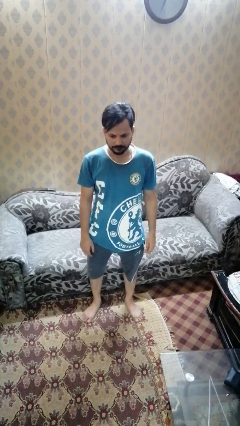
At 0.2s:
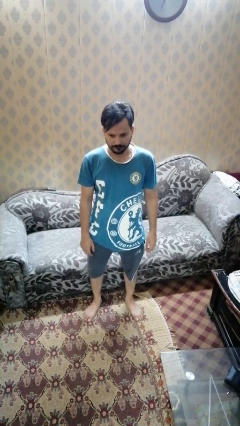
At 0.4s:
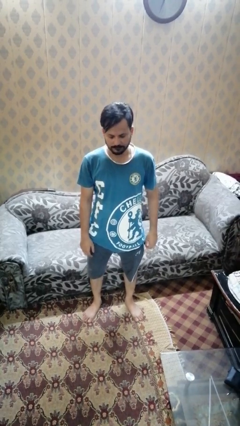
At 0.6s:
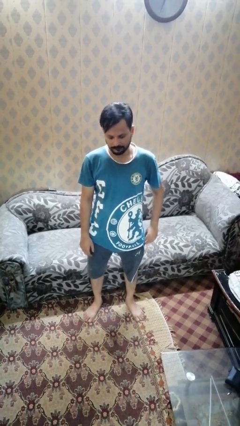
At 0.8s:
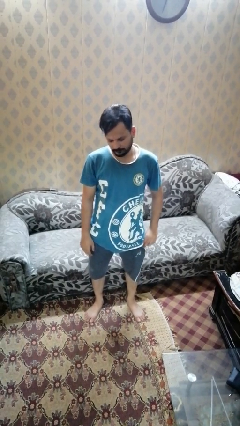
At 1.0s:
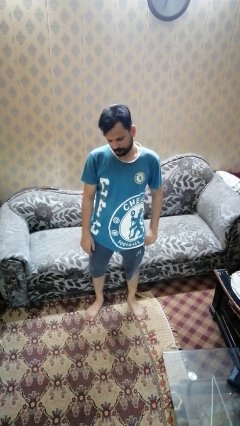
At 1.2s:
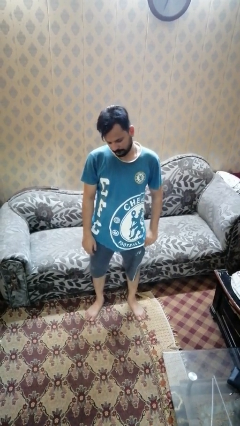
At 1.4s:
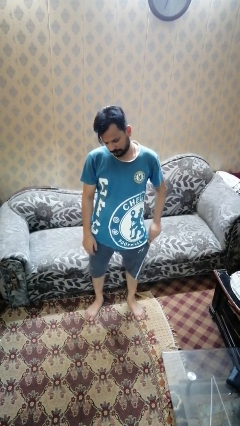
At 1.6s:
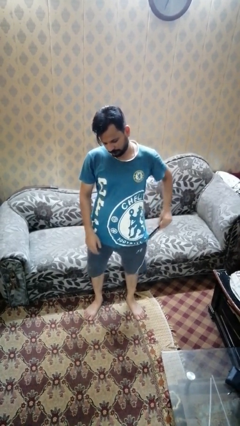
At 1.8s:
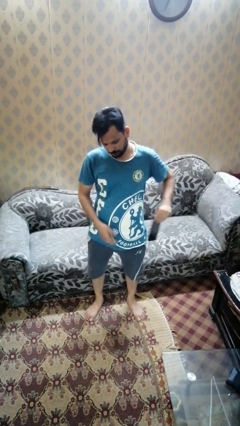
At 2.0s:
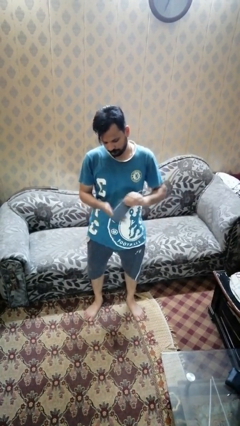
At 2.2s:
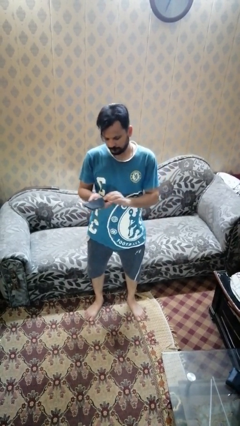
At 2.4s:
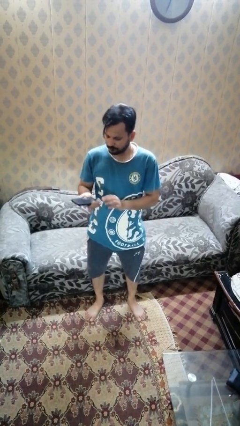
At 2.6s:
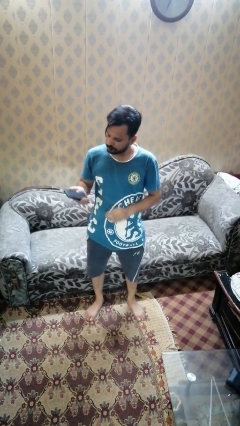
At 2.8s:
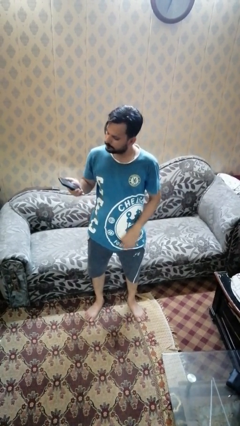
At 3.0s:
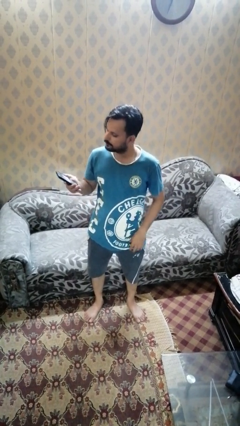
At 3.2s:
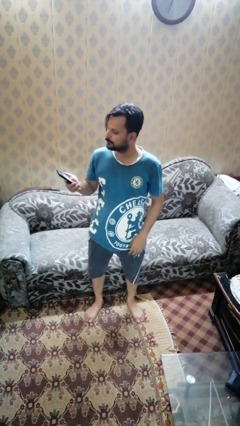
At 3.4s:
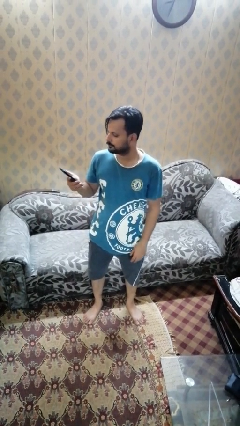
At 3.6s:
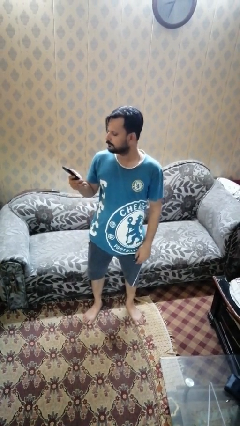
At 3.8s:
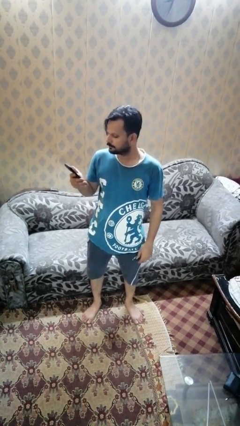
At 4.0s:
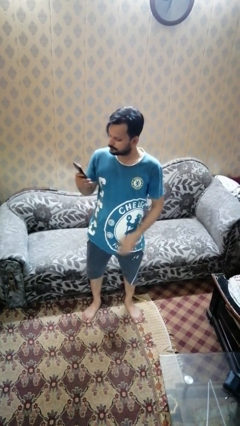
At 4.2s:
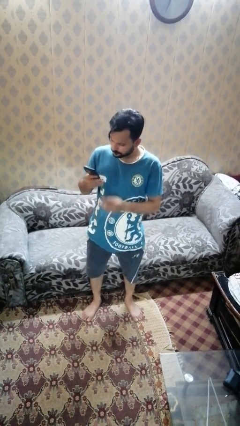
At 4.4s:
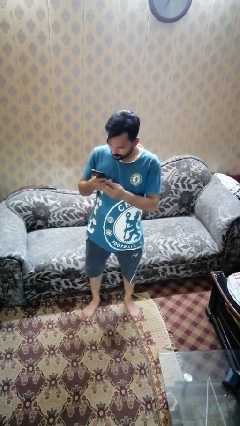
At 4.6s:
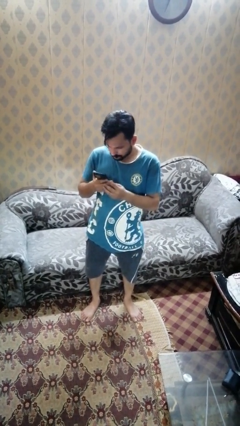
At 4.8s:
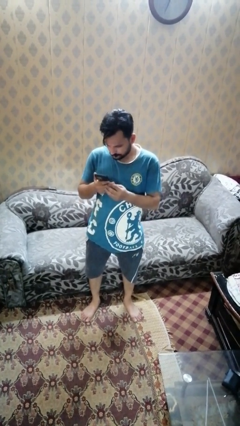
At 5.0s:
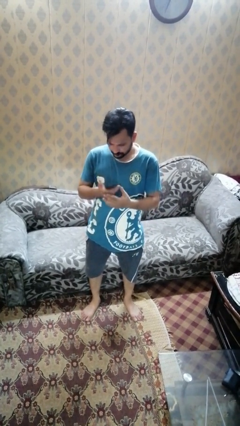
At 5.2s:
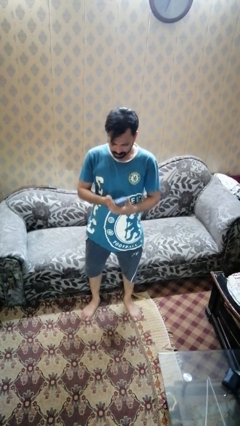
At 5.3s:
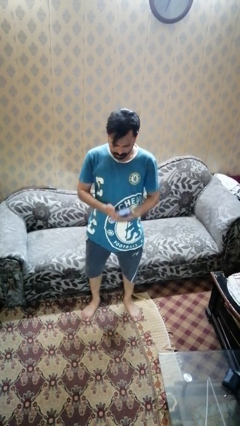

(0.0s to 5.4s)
person takes phone from pocket

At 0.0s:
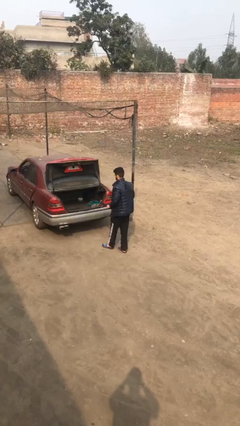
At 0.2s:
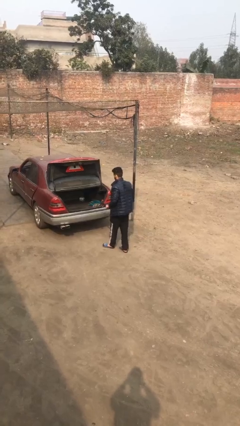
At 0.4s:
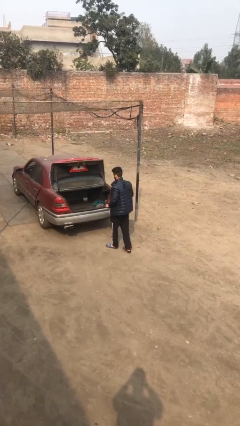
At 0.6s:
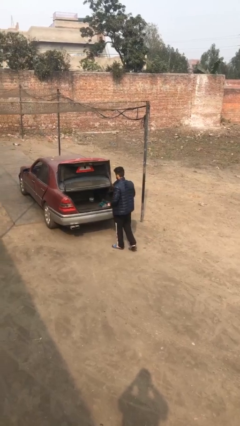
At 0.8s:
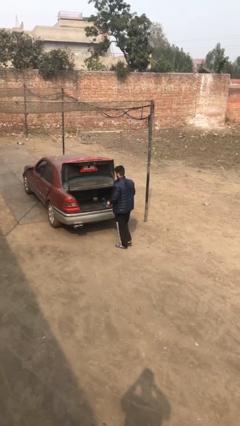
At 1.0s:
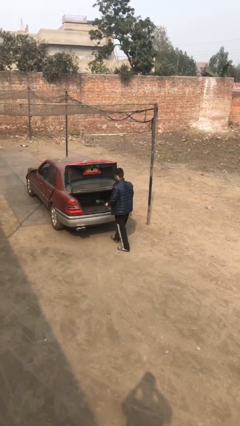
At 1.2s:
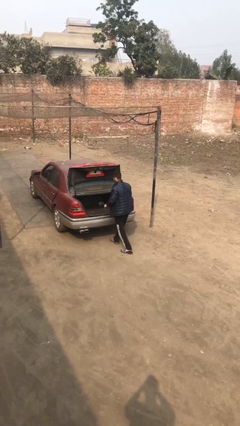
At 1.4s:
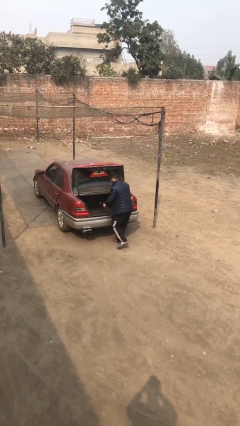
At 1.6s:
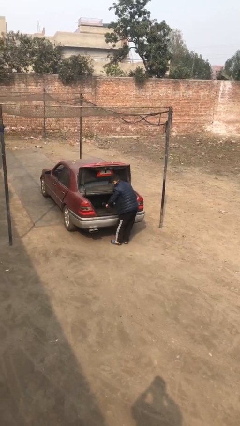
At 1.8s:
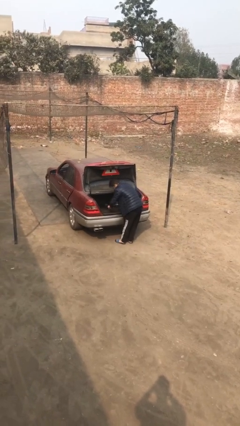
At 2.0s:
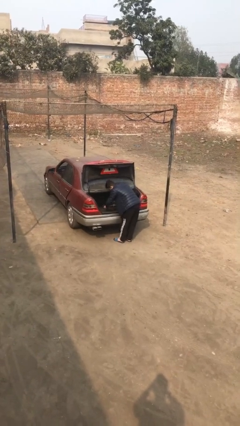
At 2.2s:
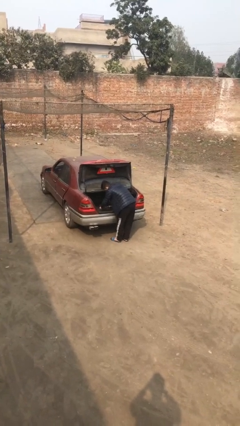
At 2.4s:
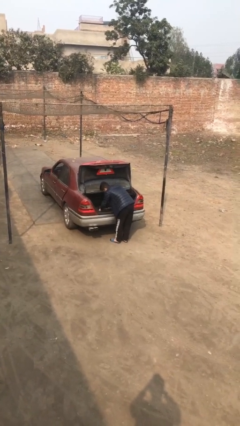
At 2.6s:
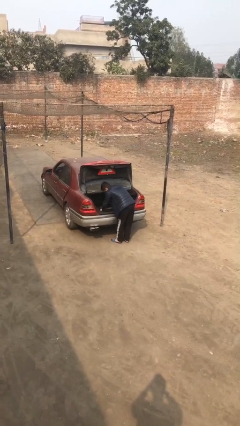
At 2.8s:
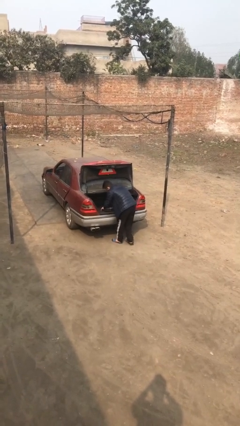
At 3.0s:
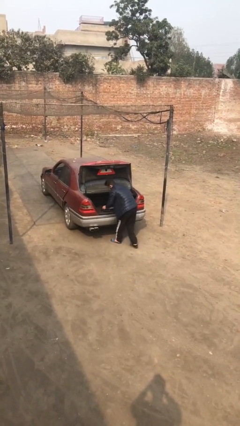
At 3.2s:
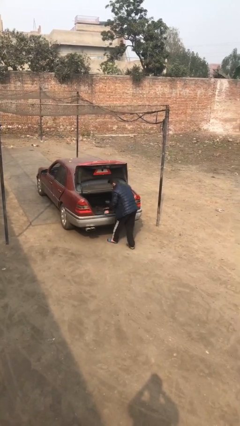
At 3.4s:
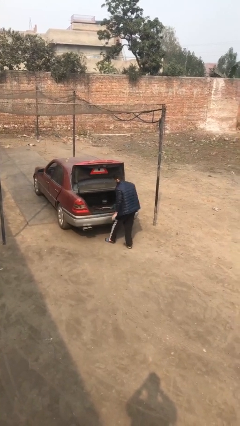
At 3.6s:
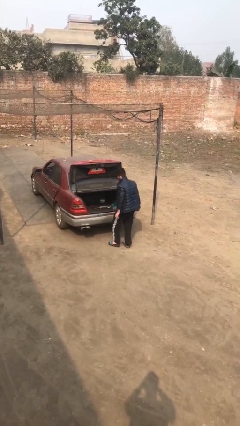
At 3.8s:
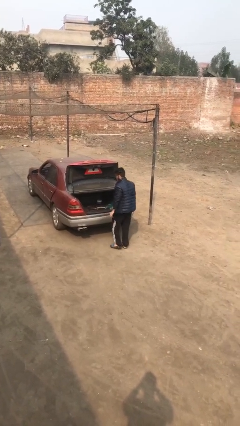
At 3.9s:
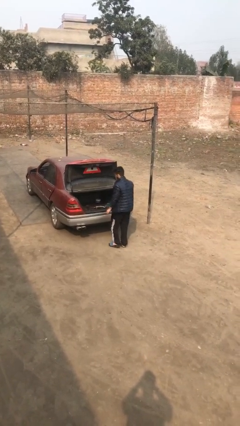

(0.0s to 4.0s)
person loads car

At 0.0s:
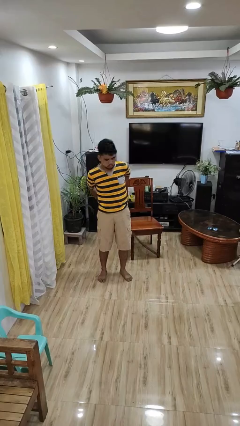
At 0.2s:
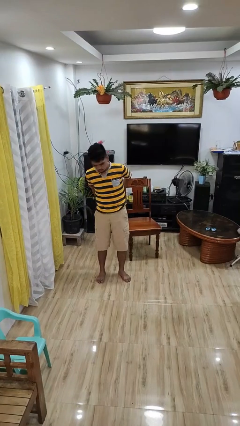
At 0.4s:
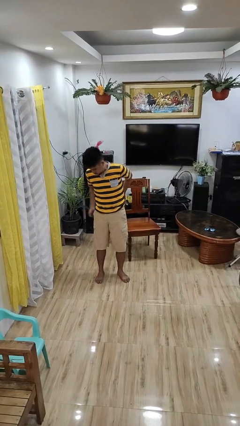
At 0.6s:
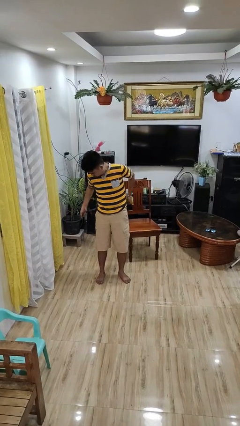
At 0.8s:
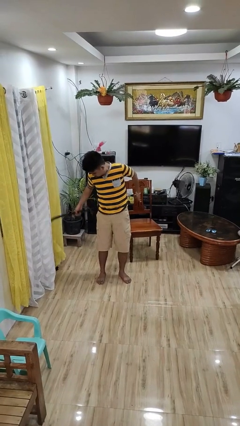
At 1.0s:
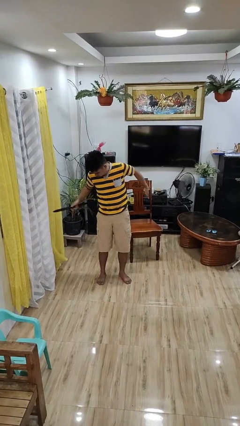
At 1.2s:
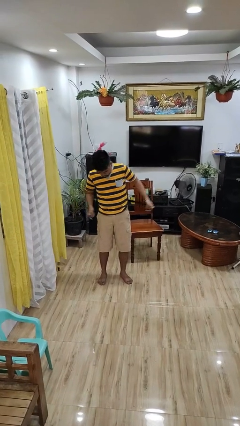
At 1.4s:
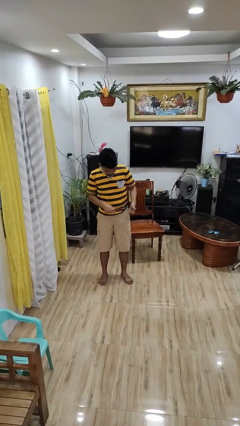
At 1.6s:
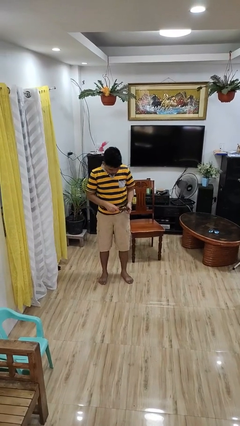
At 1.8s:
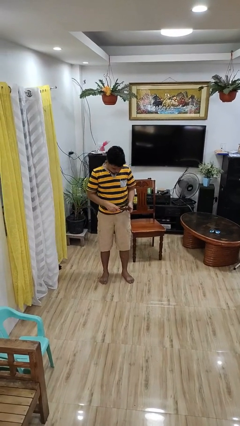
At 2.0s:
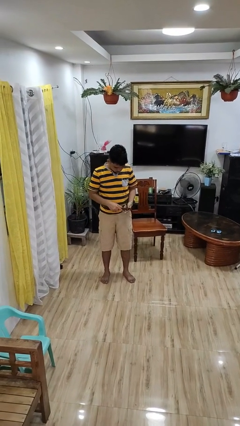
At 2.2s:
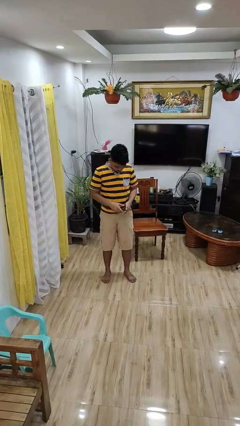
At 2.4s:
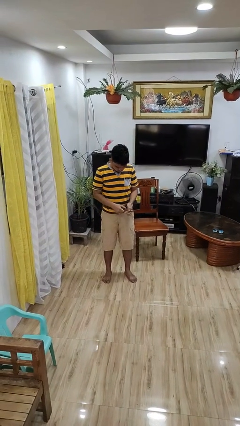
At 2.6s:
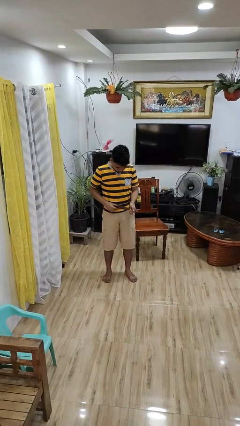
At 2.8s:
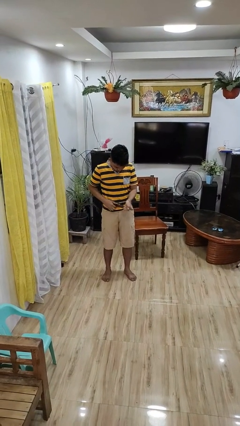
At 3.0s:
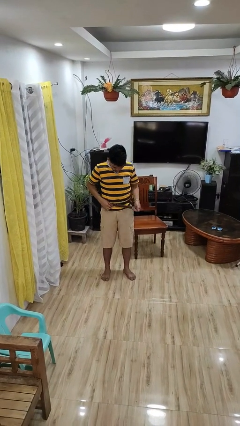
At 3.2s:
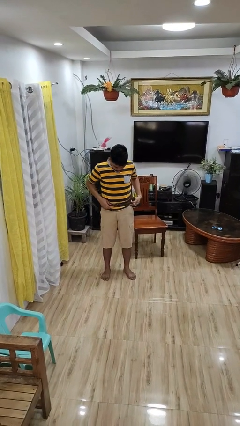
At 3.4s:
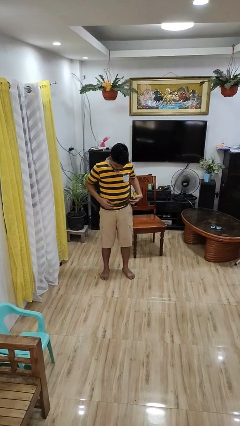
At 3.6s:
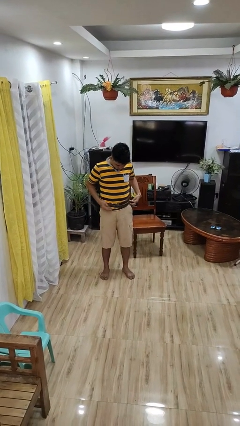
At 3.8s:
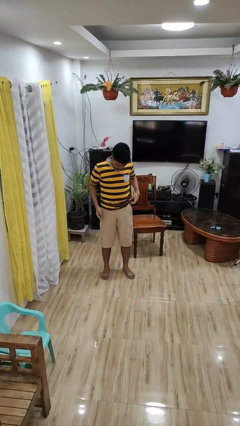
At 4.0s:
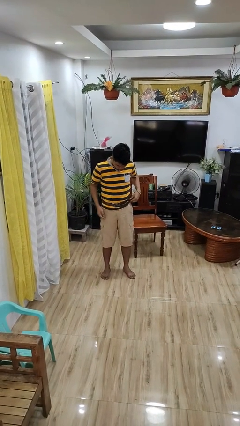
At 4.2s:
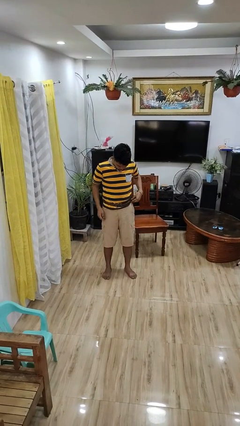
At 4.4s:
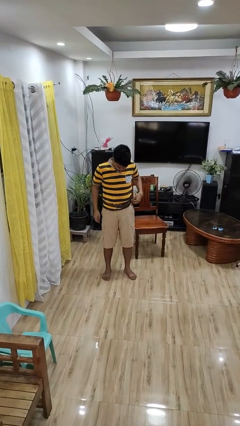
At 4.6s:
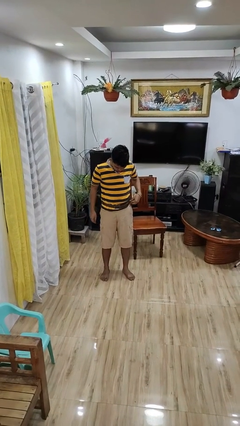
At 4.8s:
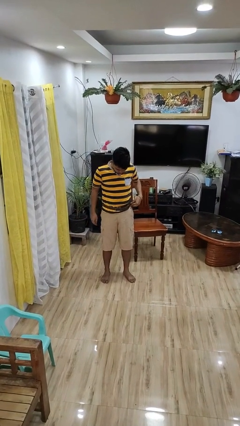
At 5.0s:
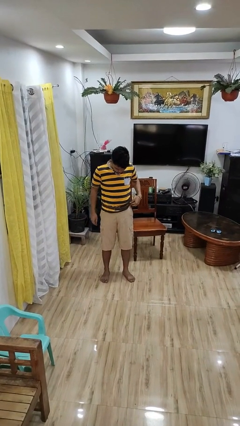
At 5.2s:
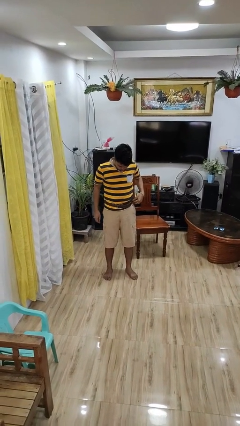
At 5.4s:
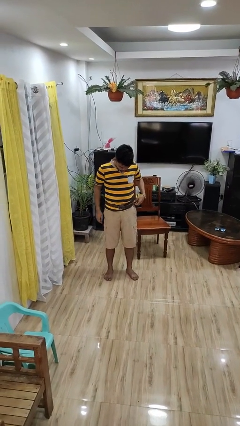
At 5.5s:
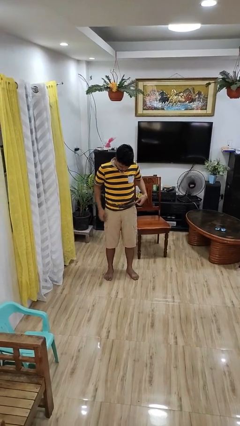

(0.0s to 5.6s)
person puts on belt

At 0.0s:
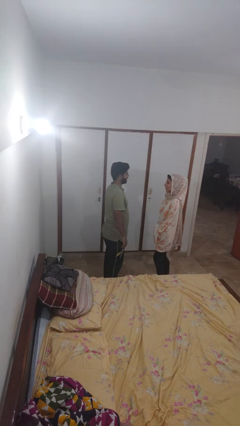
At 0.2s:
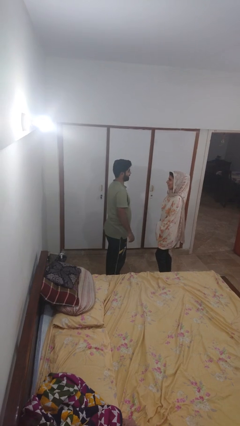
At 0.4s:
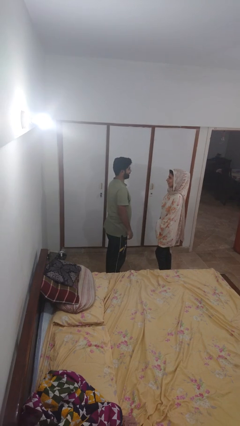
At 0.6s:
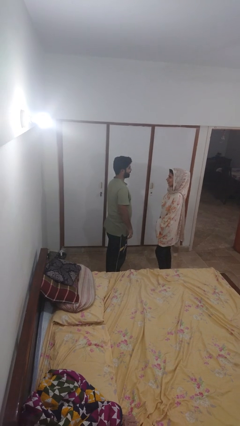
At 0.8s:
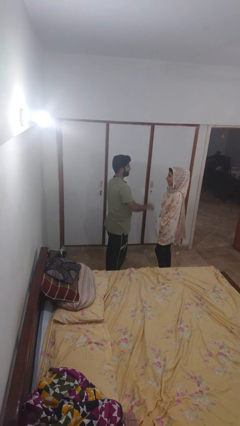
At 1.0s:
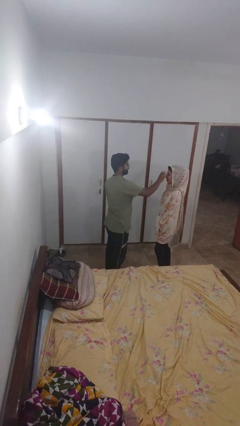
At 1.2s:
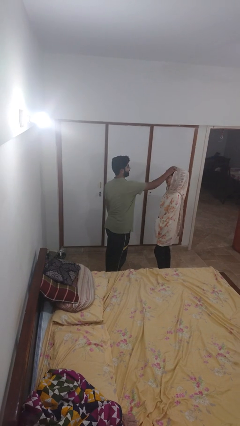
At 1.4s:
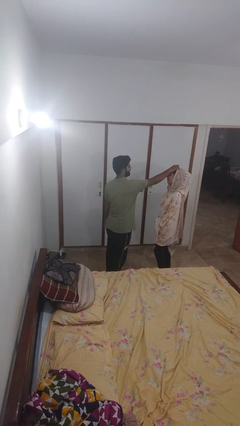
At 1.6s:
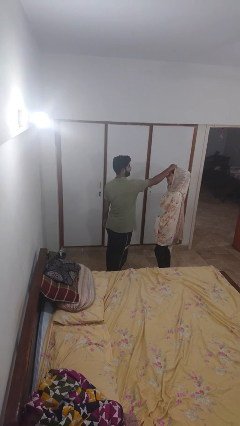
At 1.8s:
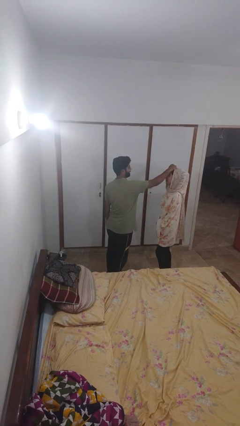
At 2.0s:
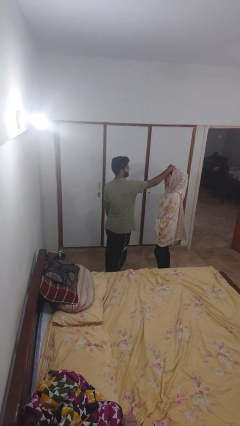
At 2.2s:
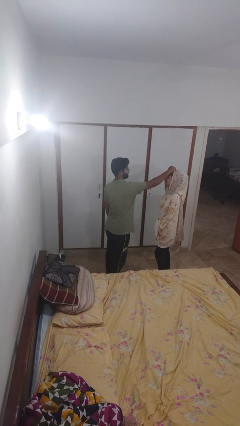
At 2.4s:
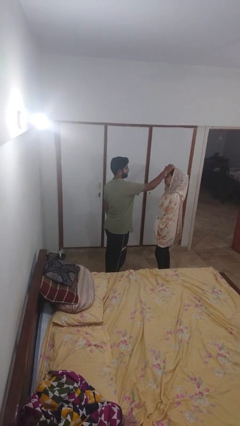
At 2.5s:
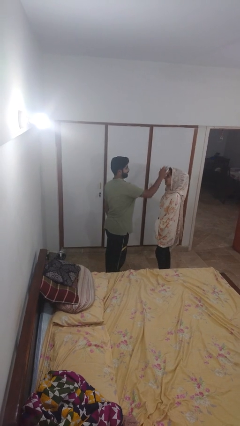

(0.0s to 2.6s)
person grabs person by hair

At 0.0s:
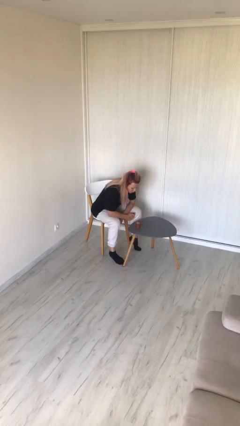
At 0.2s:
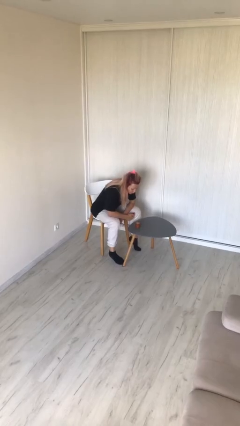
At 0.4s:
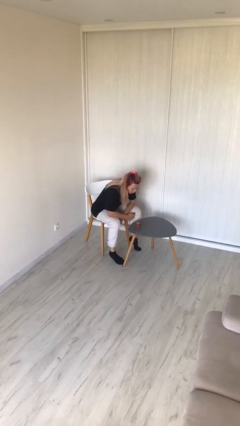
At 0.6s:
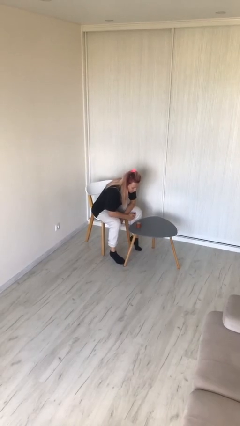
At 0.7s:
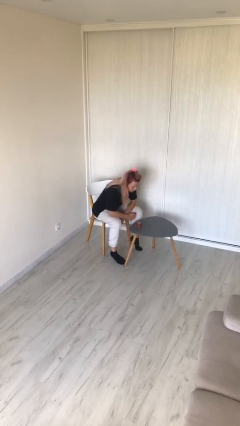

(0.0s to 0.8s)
person extinguishes candle
